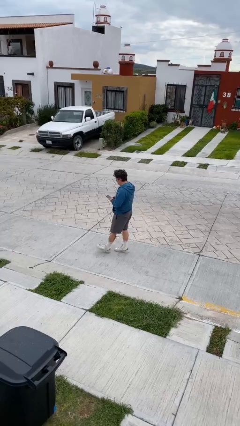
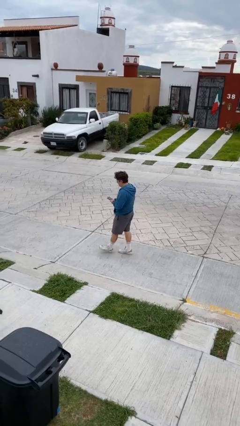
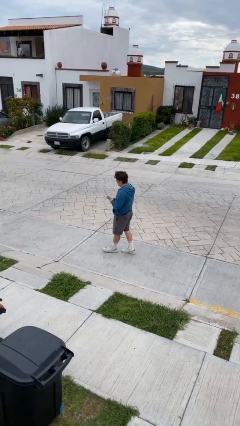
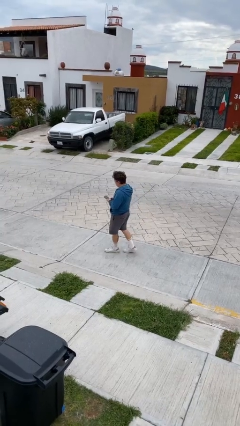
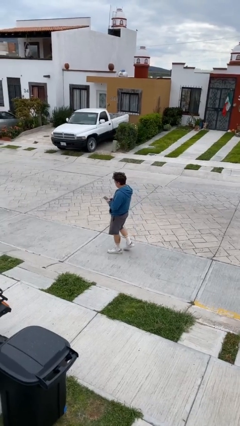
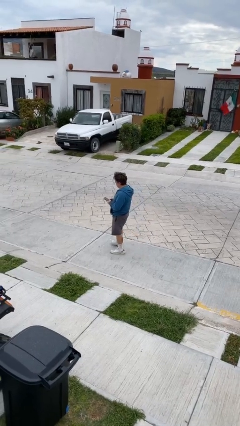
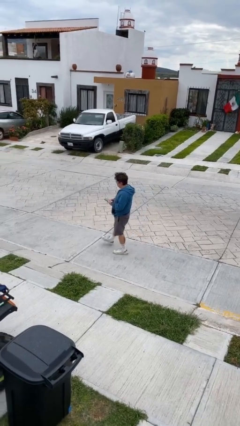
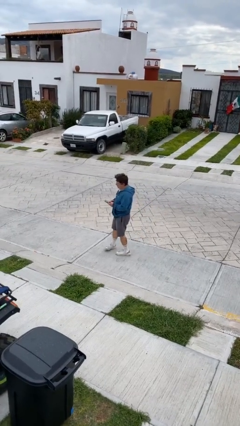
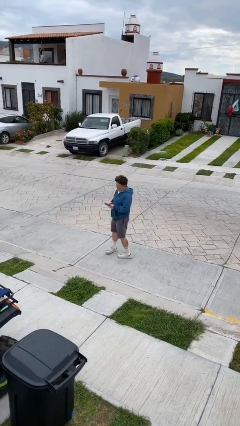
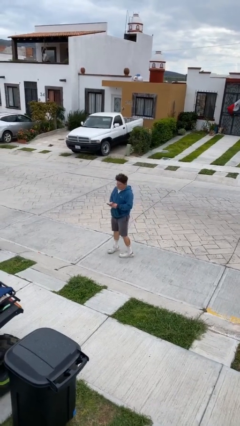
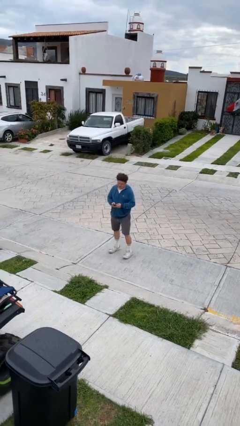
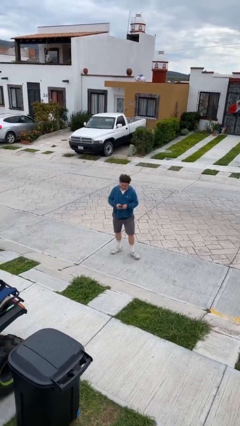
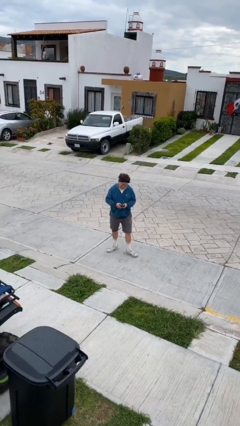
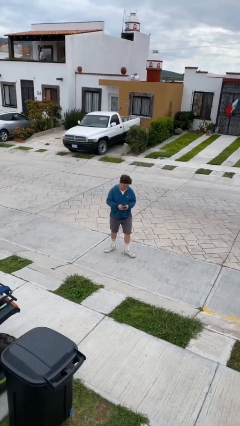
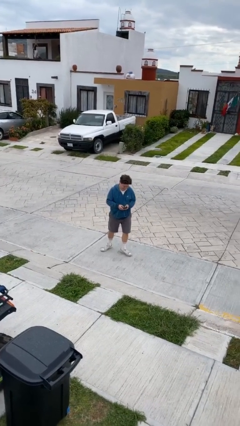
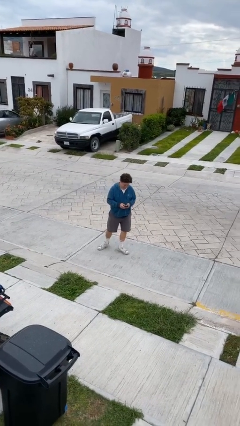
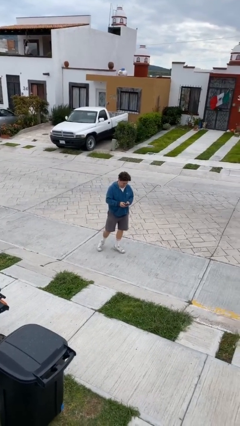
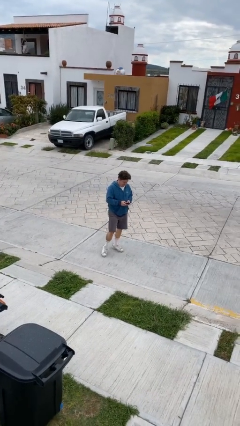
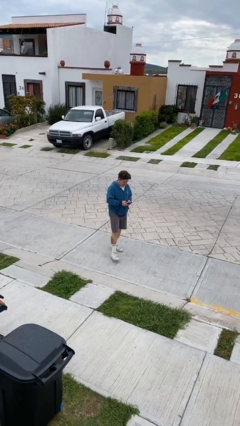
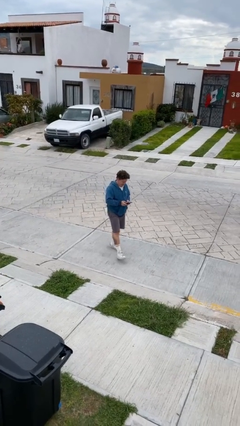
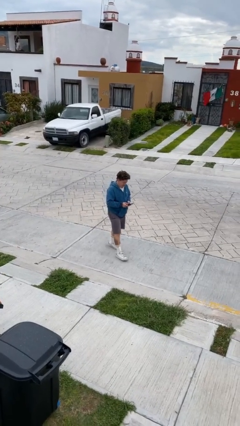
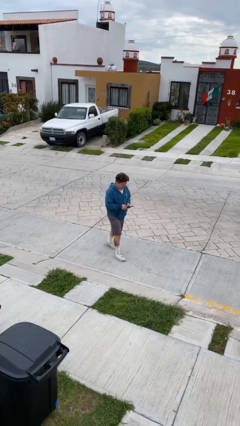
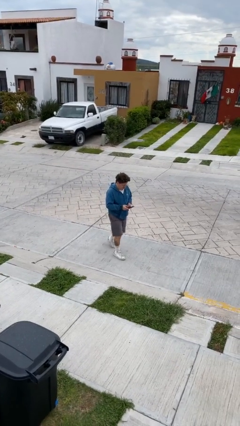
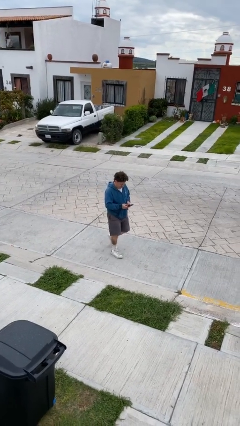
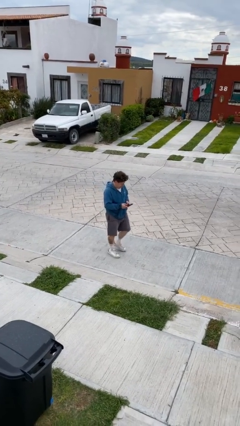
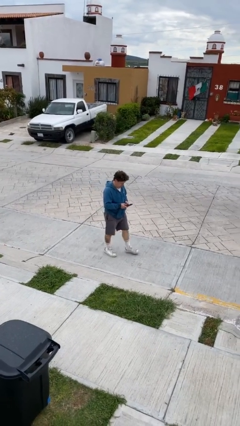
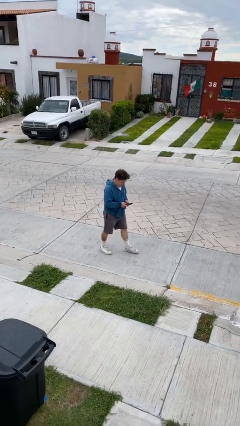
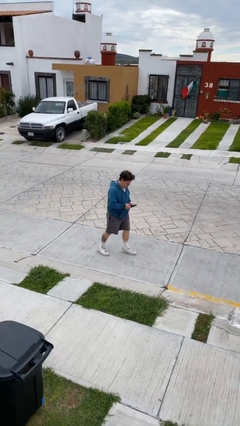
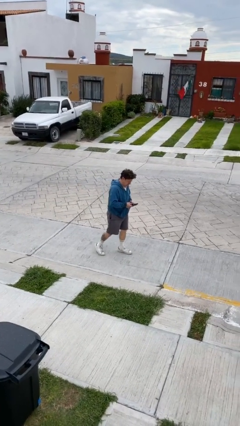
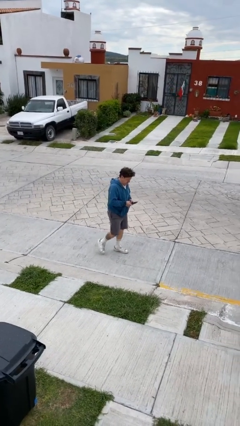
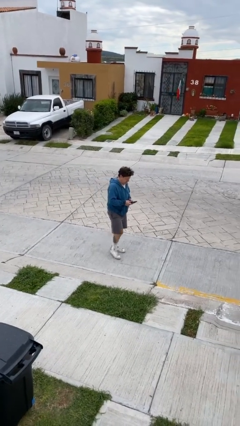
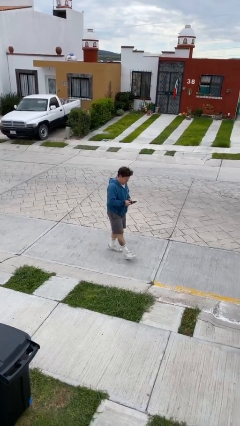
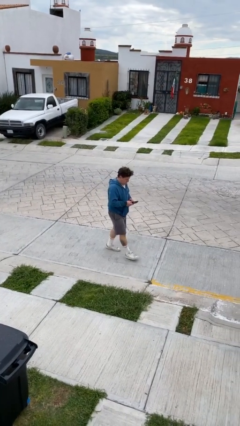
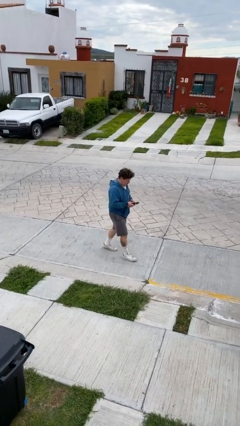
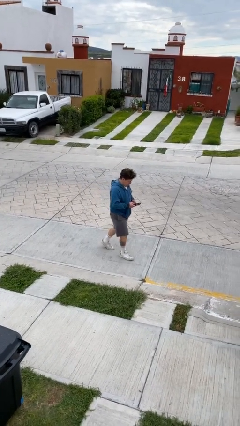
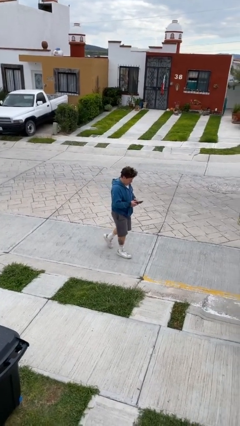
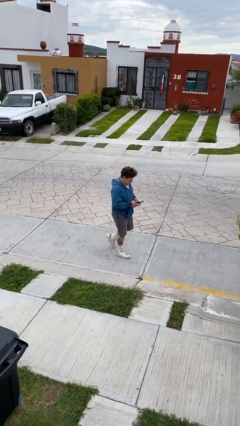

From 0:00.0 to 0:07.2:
person texts on phone

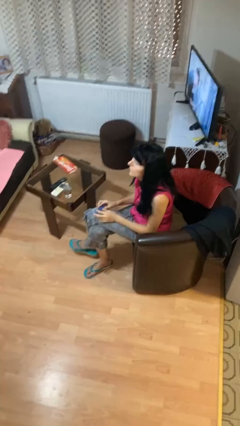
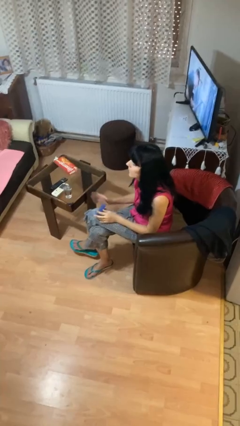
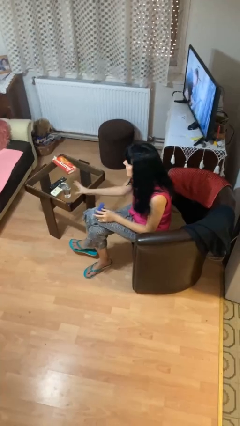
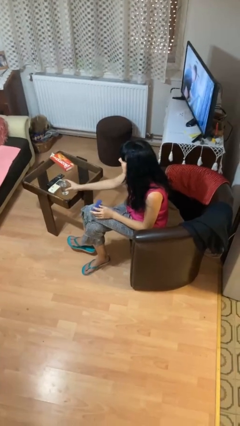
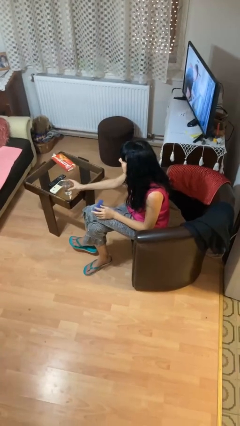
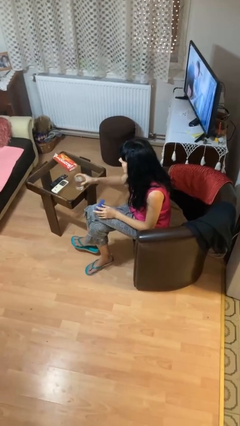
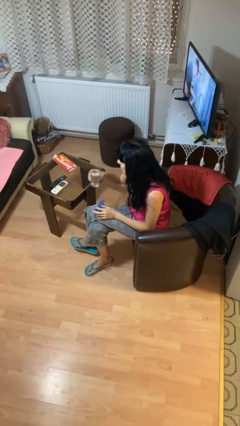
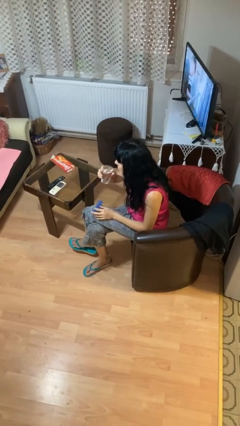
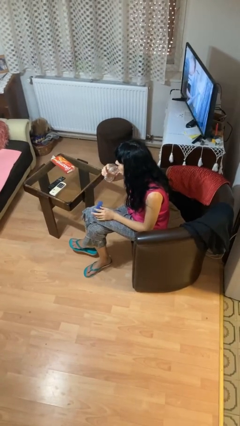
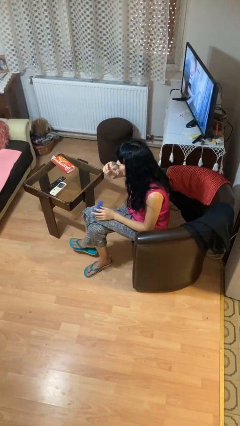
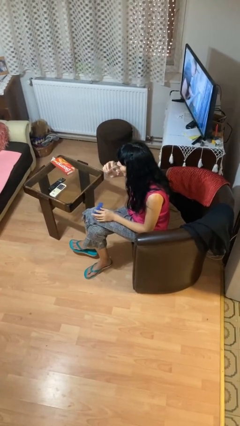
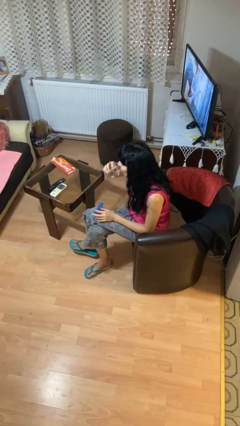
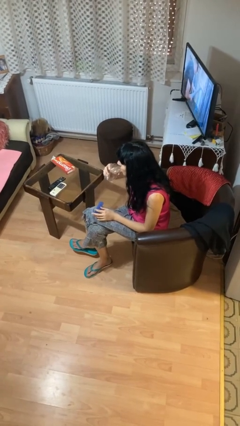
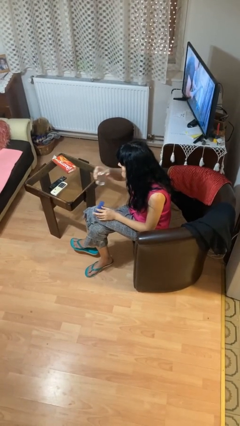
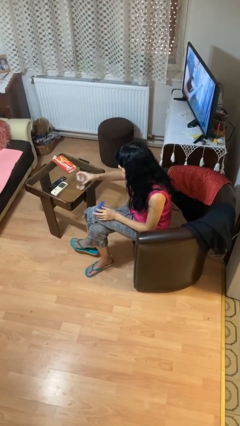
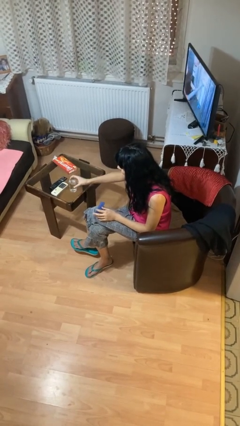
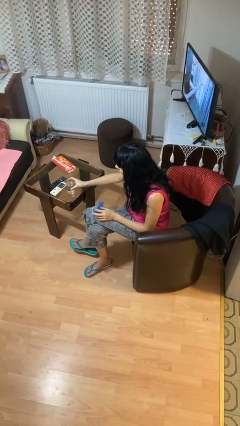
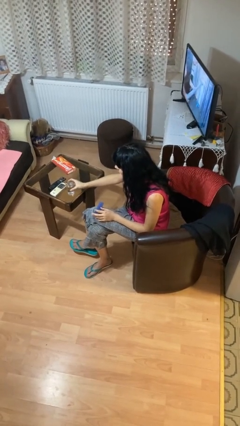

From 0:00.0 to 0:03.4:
person drinks from cup

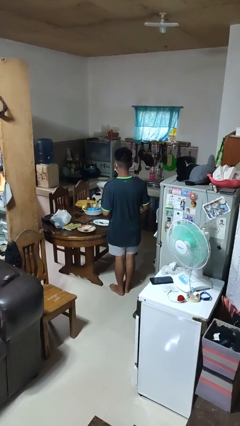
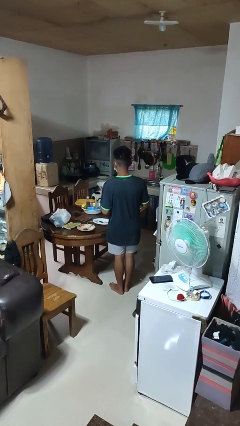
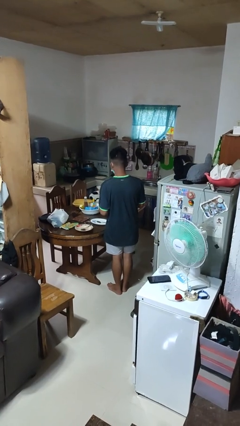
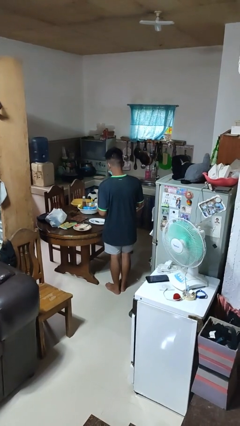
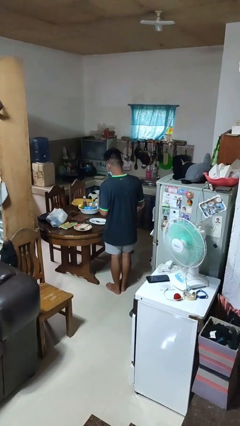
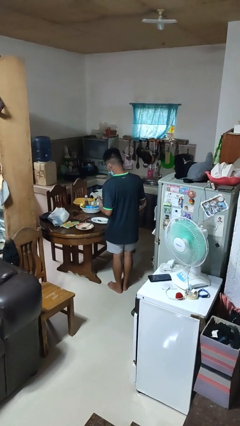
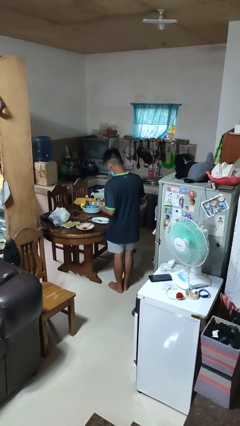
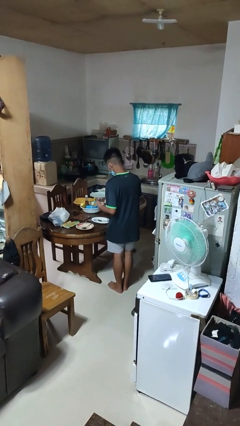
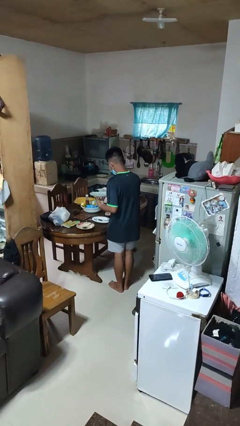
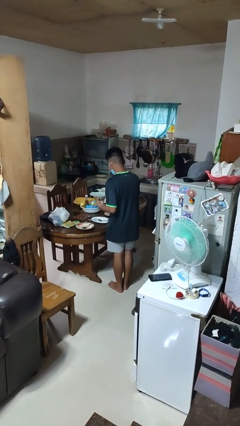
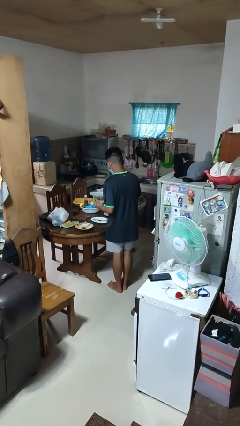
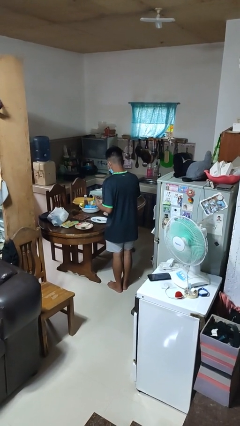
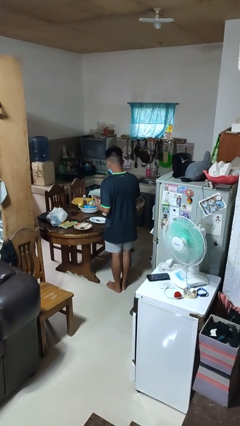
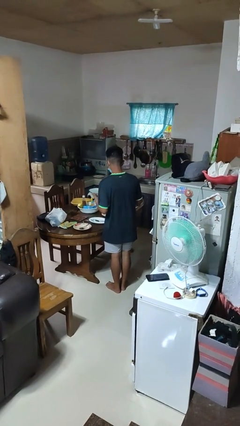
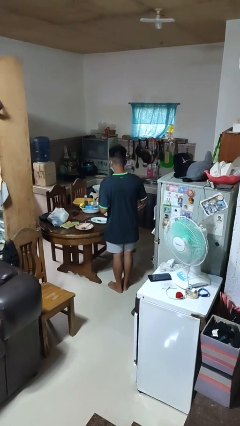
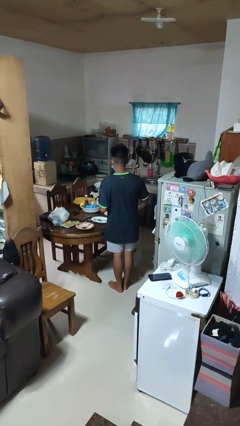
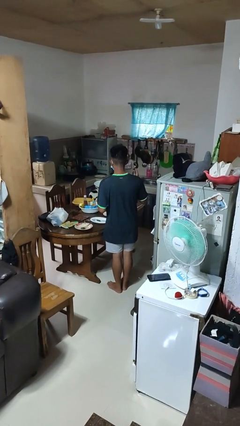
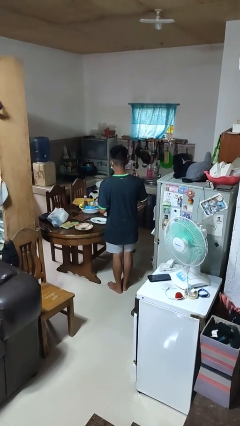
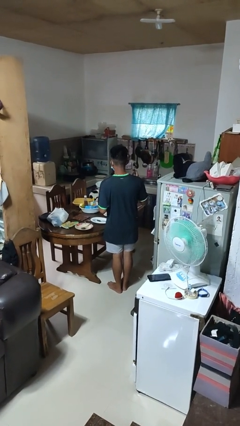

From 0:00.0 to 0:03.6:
person sets table

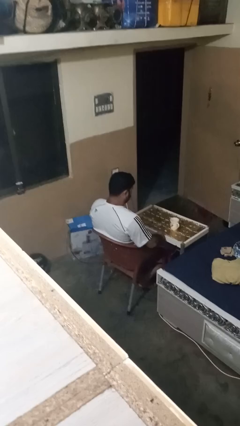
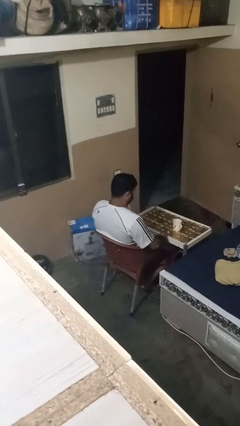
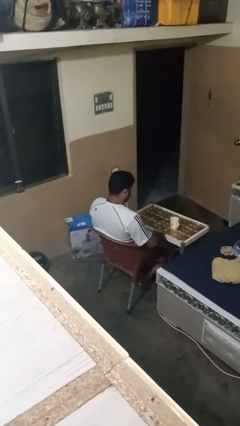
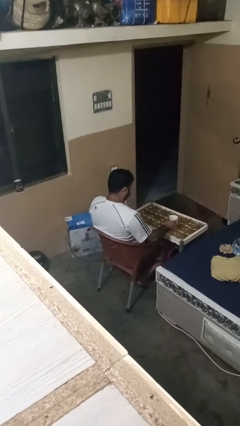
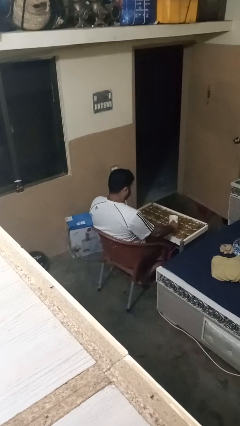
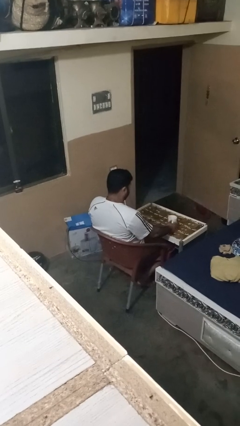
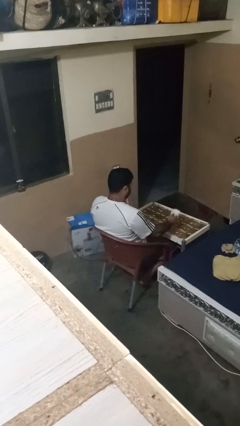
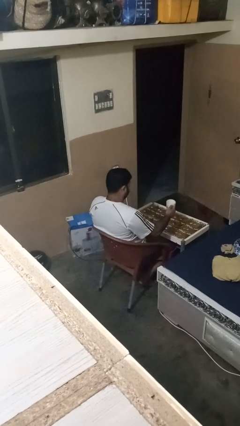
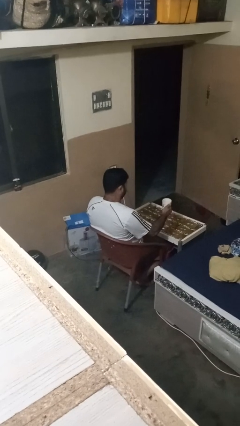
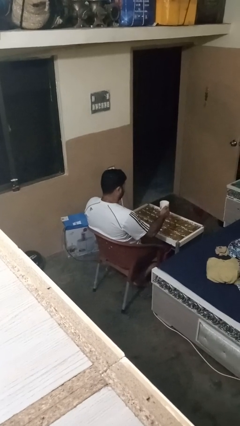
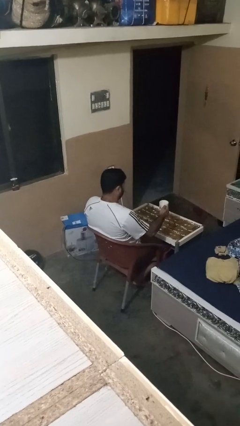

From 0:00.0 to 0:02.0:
person picks up object from table

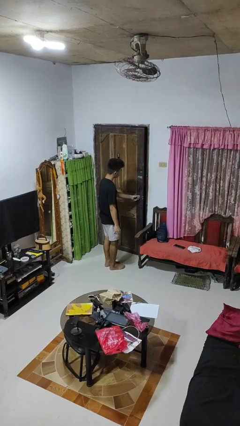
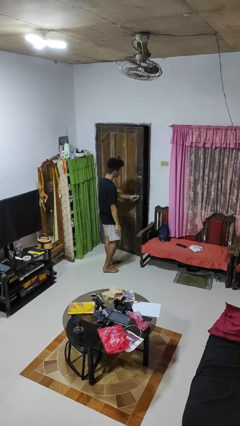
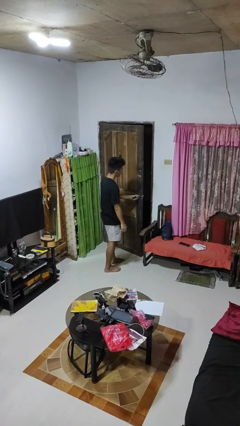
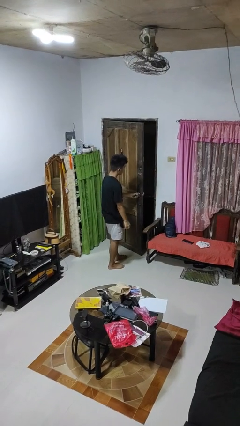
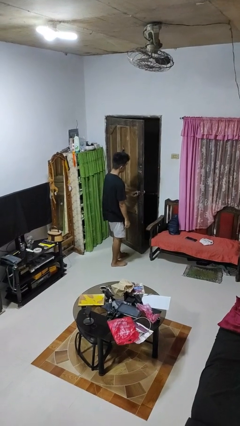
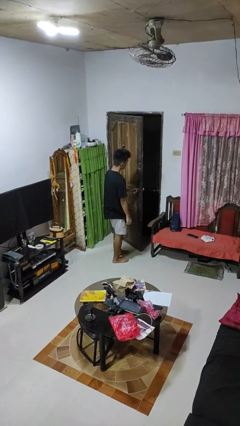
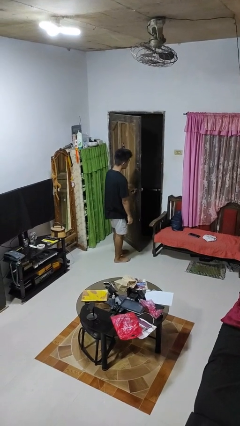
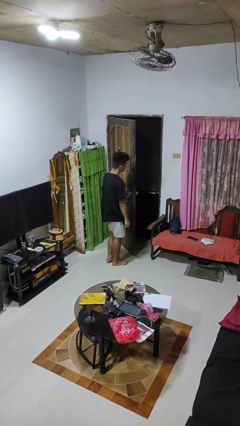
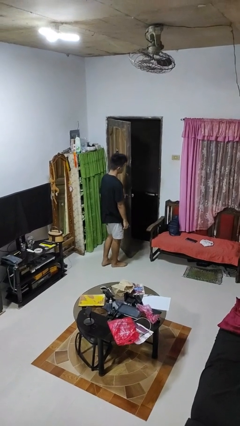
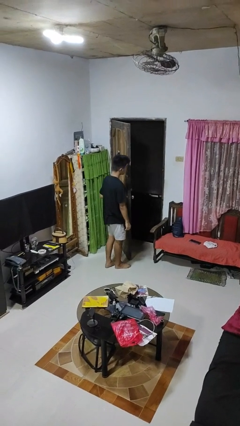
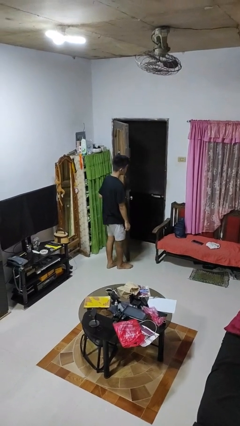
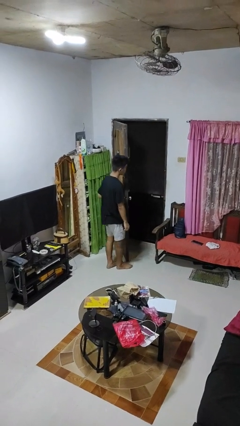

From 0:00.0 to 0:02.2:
person opens facility door
